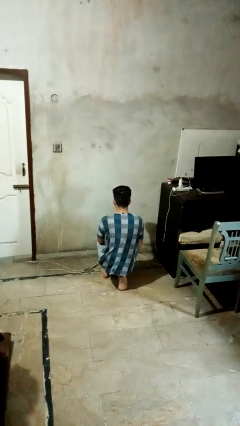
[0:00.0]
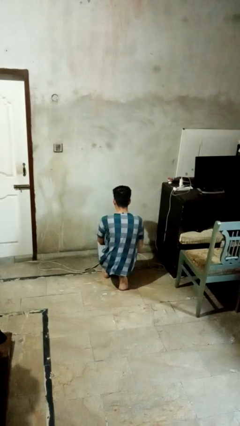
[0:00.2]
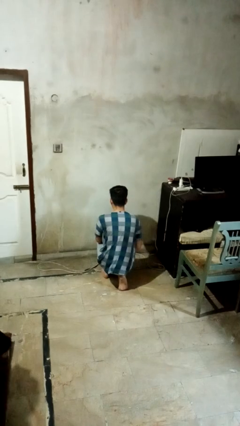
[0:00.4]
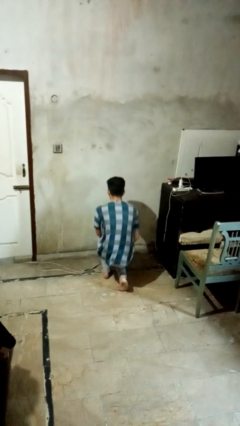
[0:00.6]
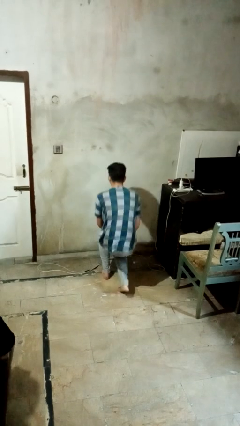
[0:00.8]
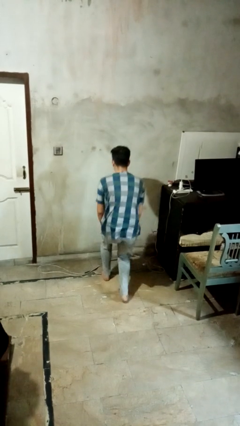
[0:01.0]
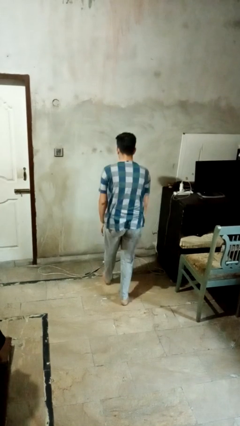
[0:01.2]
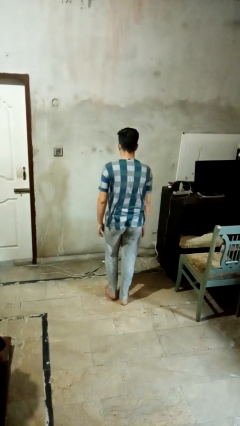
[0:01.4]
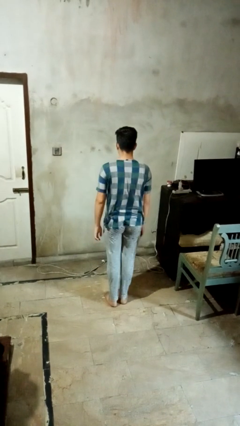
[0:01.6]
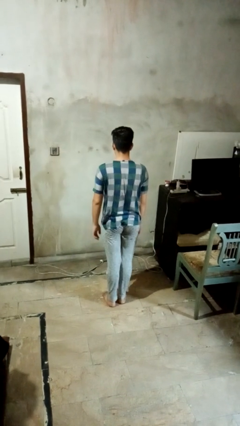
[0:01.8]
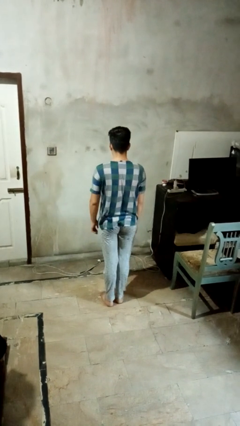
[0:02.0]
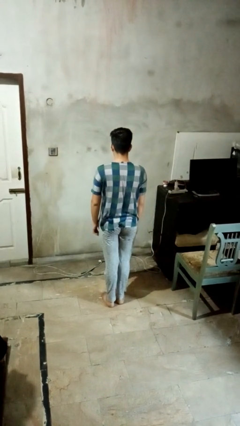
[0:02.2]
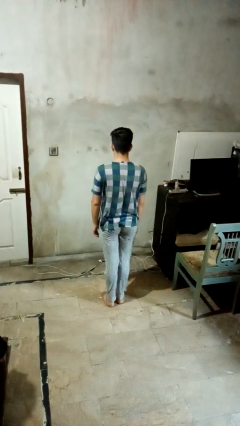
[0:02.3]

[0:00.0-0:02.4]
person stands up from floor

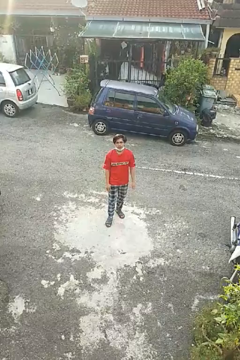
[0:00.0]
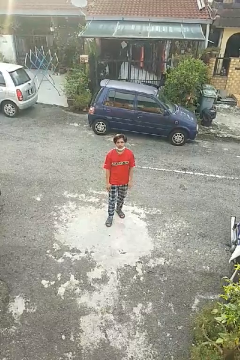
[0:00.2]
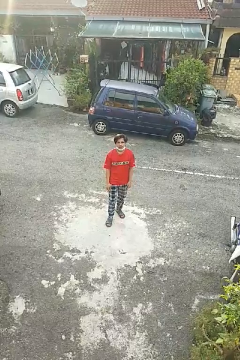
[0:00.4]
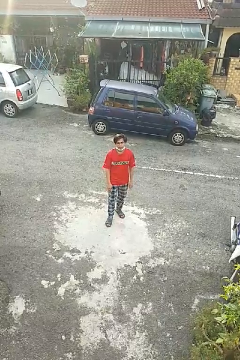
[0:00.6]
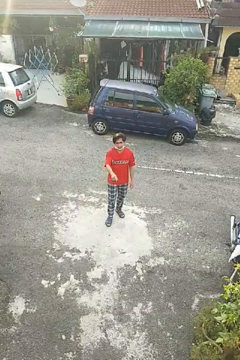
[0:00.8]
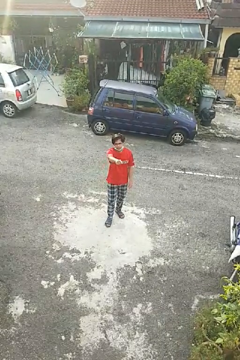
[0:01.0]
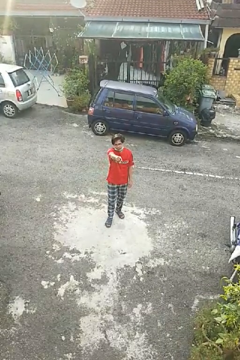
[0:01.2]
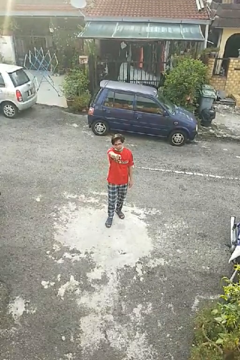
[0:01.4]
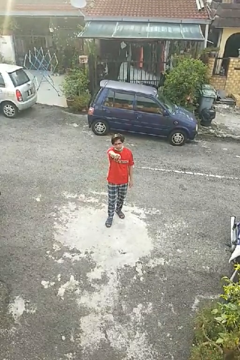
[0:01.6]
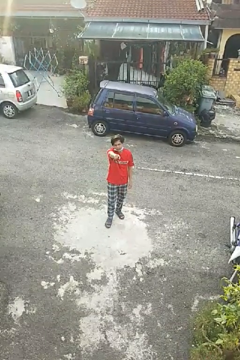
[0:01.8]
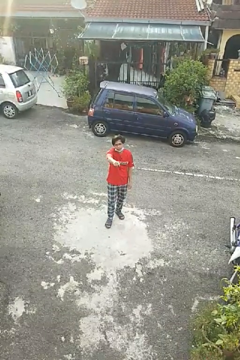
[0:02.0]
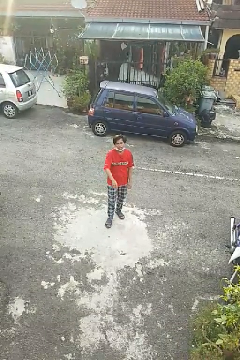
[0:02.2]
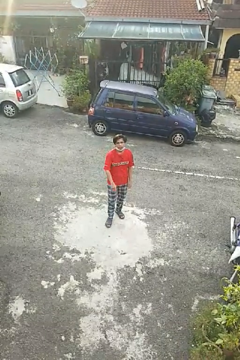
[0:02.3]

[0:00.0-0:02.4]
person points at person

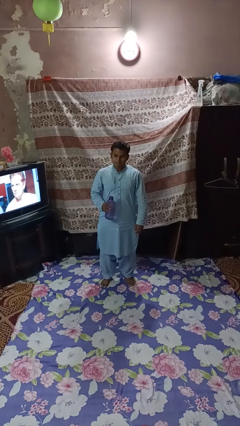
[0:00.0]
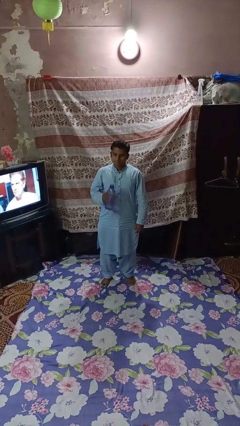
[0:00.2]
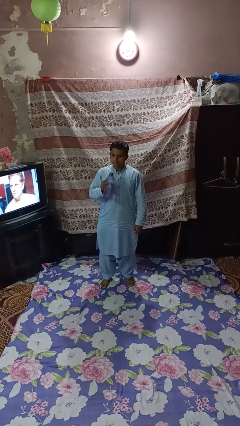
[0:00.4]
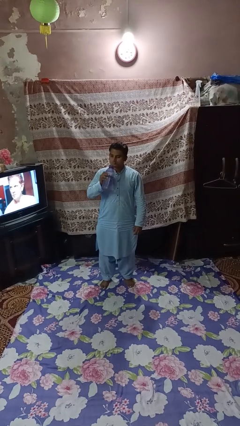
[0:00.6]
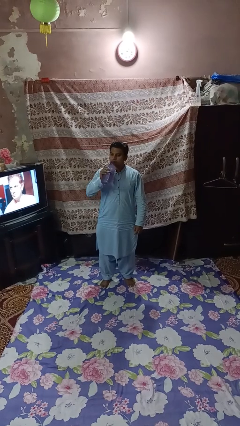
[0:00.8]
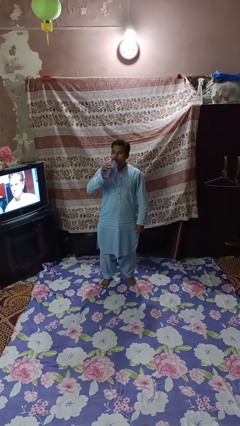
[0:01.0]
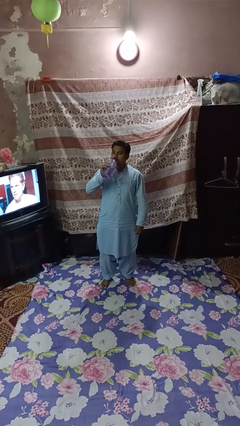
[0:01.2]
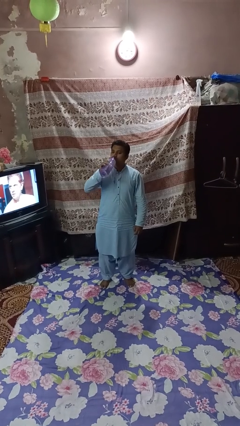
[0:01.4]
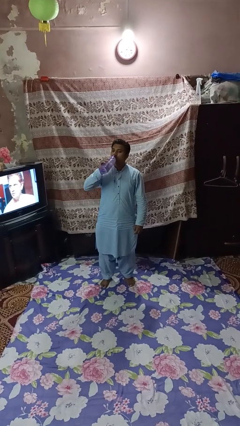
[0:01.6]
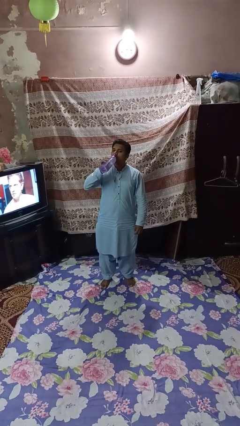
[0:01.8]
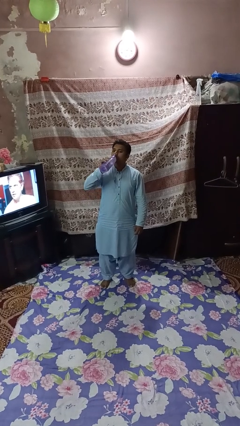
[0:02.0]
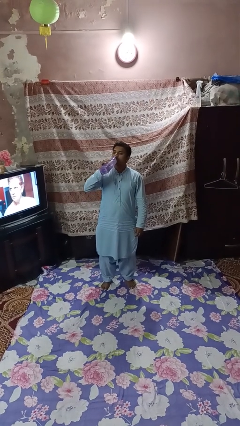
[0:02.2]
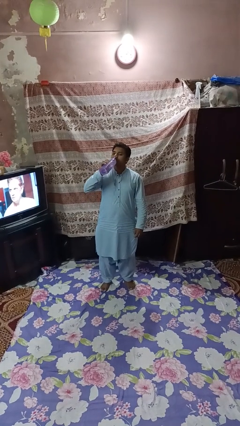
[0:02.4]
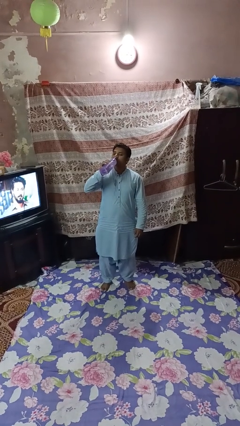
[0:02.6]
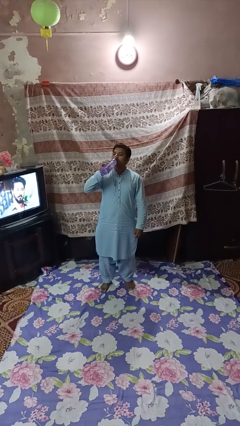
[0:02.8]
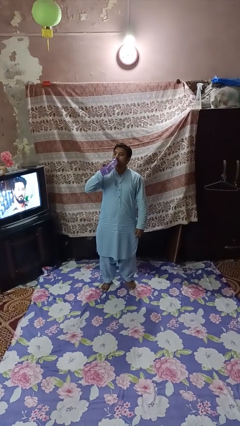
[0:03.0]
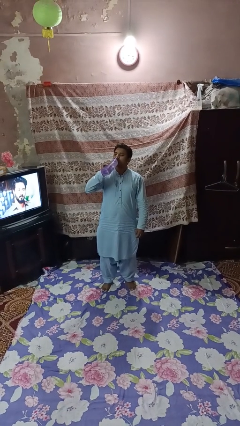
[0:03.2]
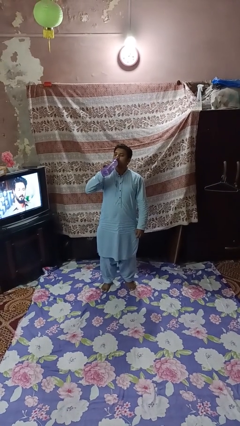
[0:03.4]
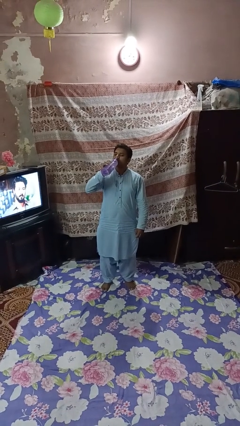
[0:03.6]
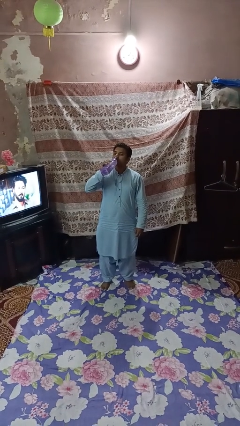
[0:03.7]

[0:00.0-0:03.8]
person drinks from bottle

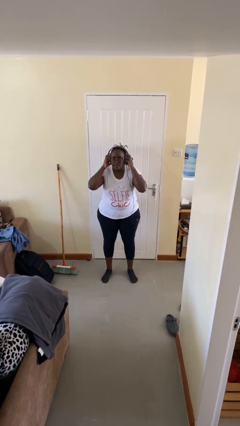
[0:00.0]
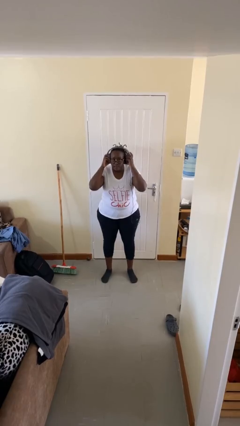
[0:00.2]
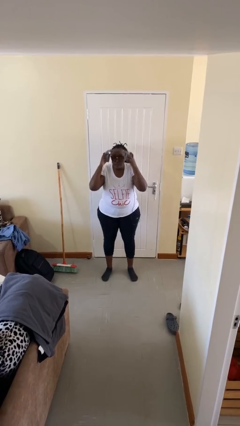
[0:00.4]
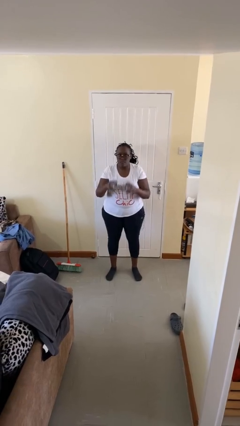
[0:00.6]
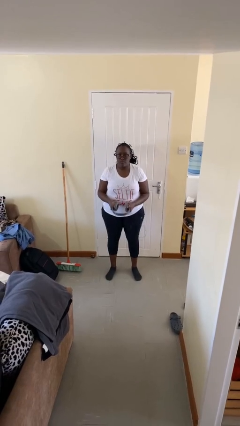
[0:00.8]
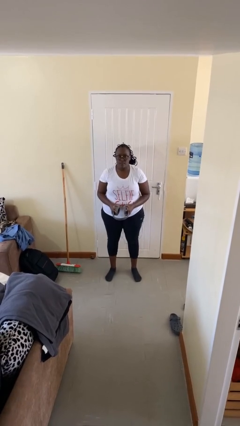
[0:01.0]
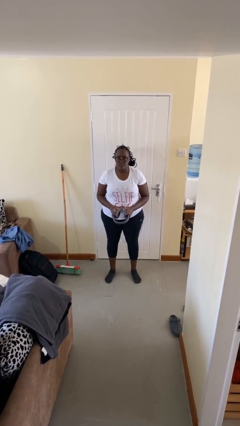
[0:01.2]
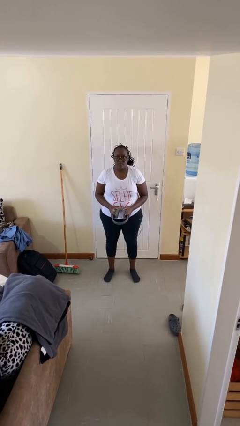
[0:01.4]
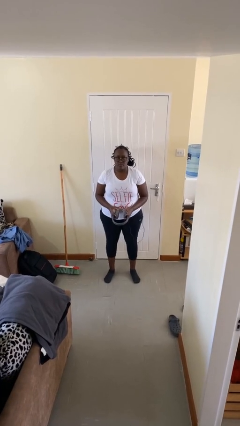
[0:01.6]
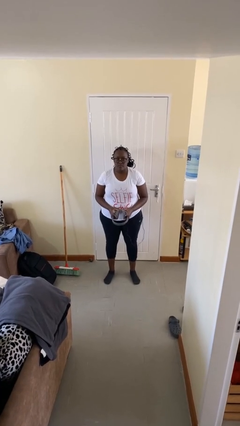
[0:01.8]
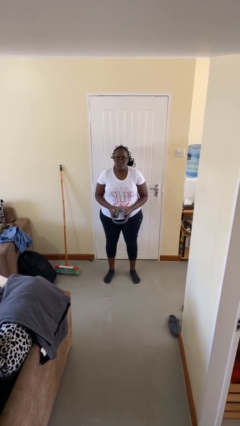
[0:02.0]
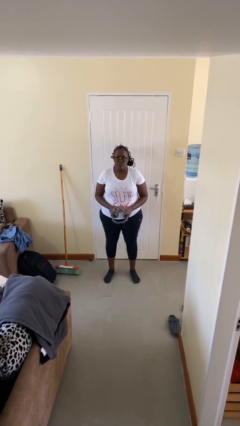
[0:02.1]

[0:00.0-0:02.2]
person takes off headphones

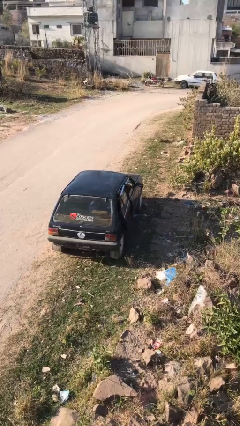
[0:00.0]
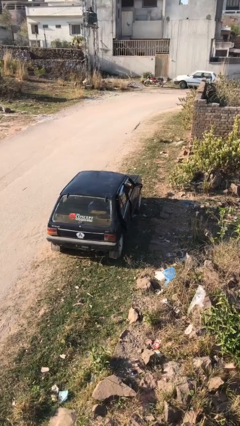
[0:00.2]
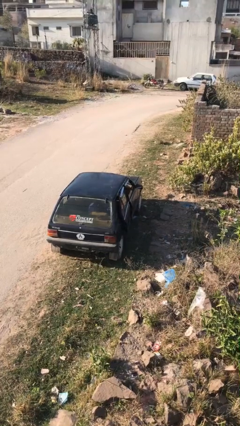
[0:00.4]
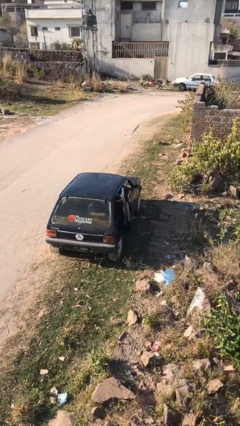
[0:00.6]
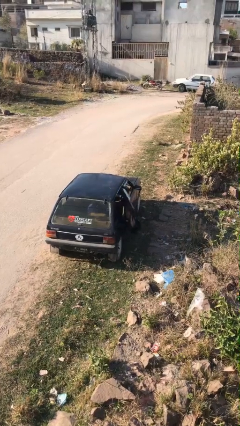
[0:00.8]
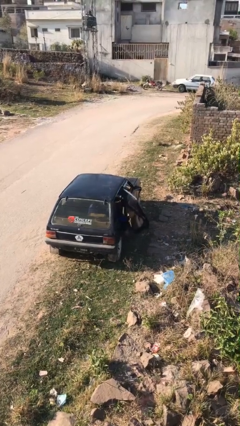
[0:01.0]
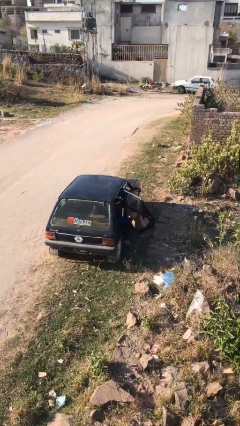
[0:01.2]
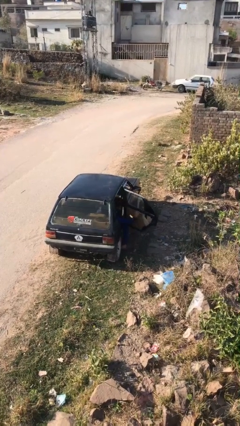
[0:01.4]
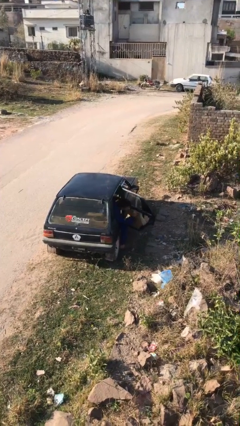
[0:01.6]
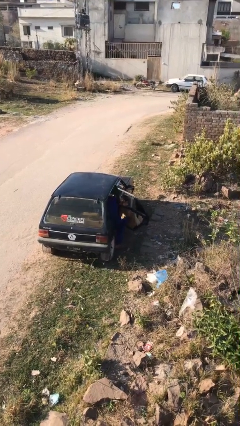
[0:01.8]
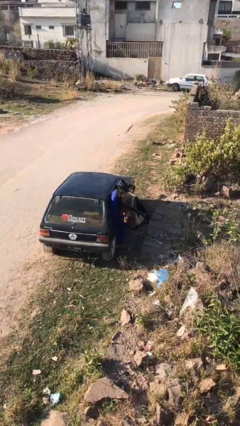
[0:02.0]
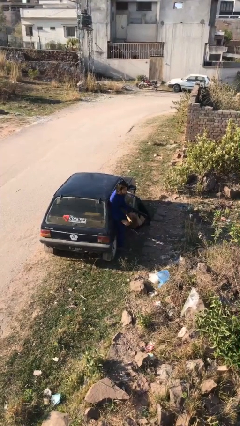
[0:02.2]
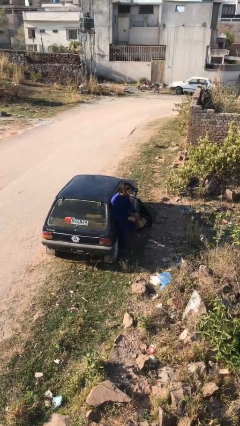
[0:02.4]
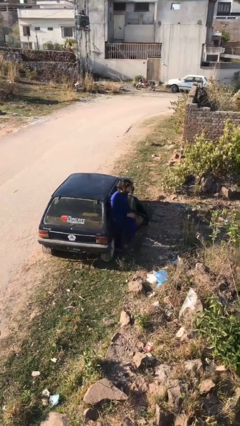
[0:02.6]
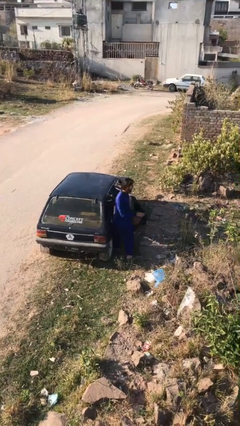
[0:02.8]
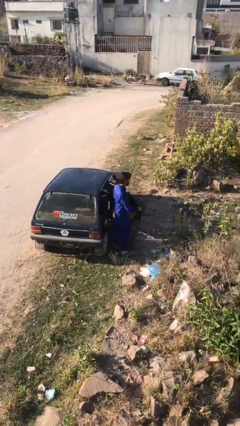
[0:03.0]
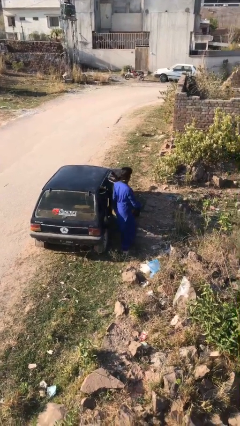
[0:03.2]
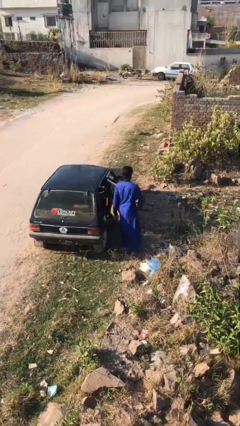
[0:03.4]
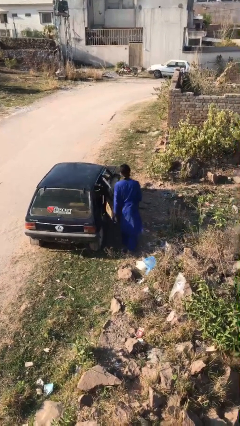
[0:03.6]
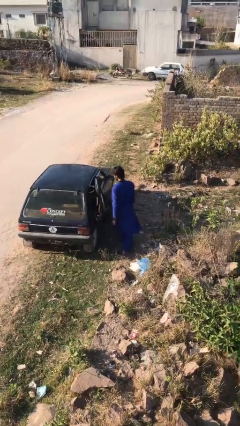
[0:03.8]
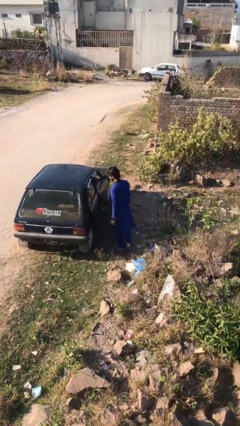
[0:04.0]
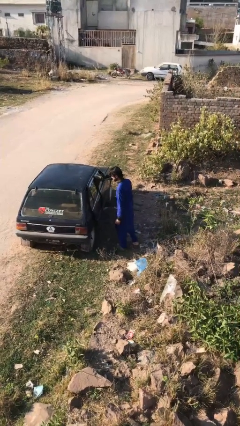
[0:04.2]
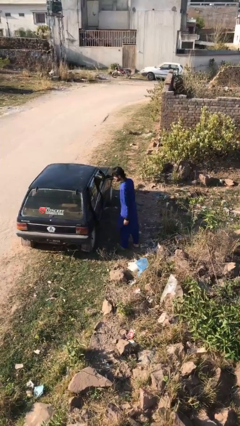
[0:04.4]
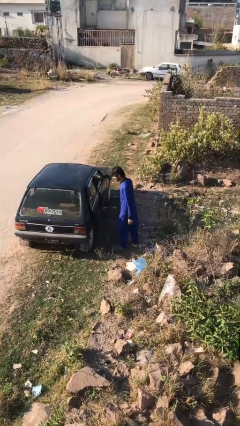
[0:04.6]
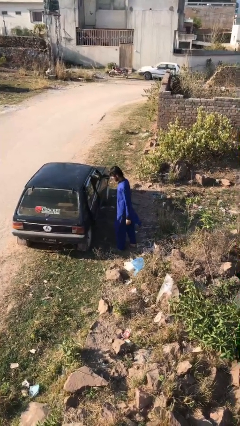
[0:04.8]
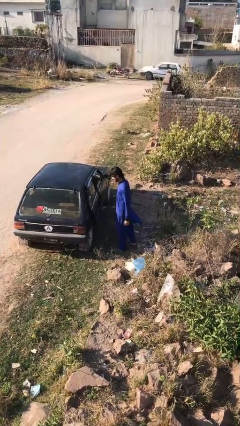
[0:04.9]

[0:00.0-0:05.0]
car drops off person

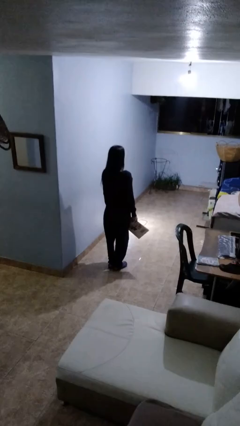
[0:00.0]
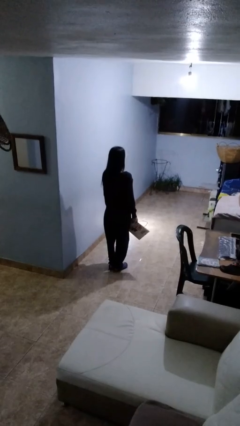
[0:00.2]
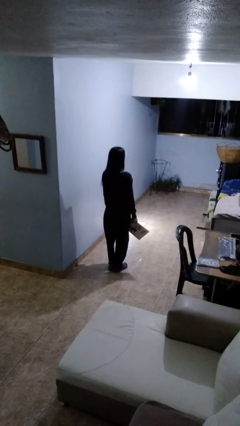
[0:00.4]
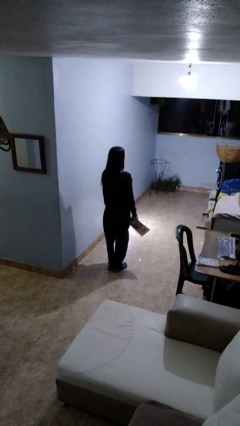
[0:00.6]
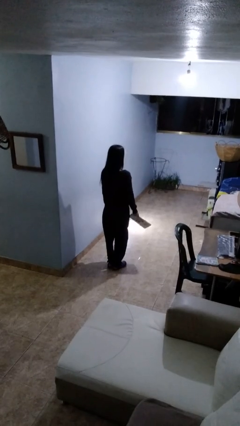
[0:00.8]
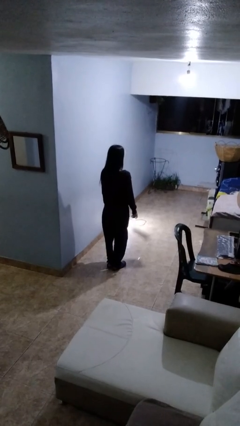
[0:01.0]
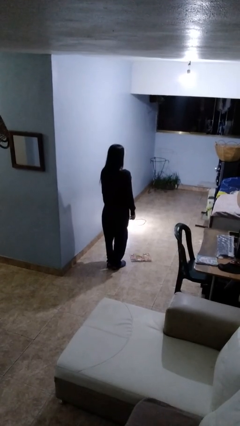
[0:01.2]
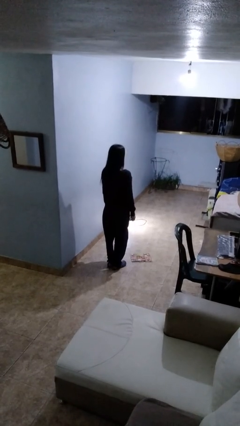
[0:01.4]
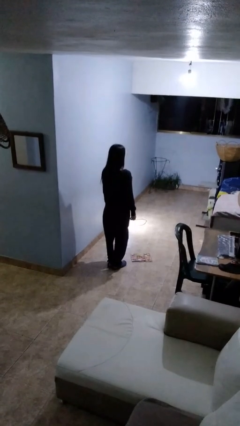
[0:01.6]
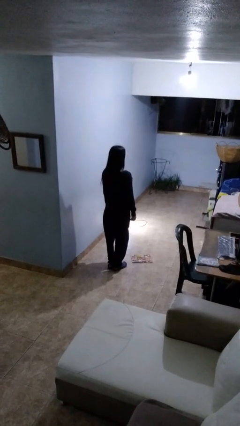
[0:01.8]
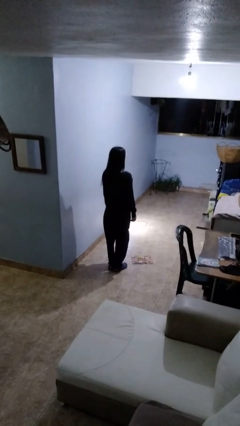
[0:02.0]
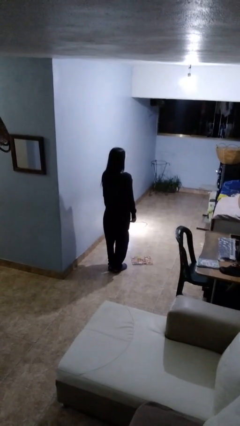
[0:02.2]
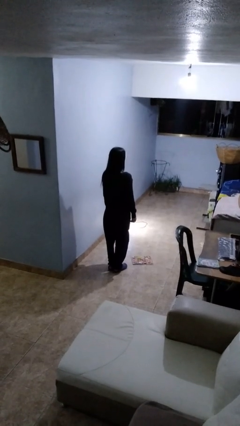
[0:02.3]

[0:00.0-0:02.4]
person throws object to ground
